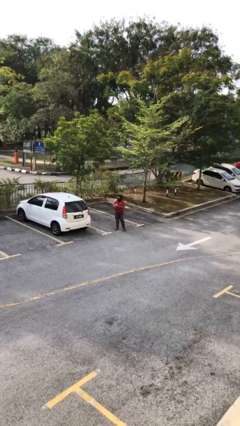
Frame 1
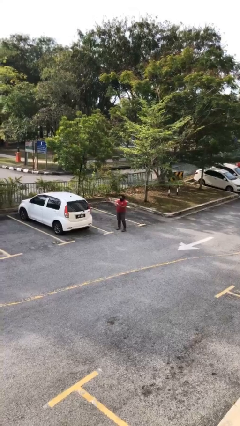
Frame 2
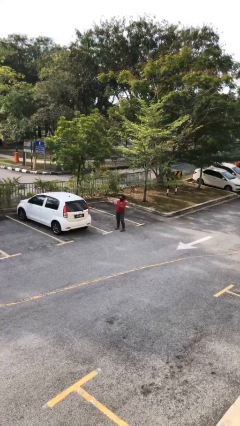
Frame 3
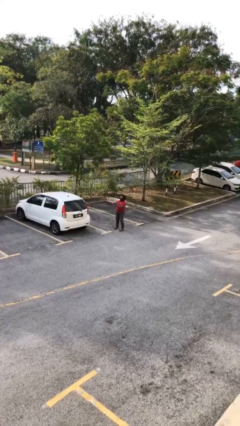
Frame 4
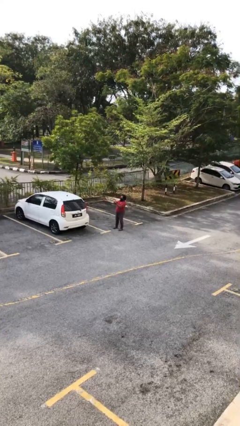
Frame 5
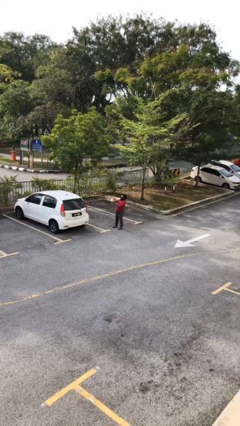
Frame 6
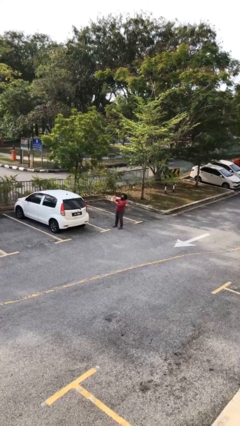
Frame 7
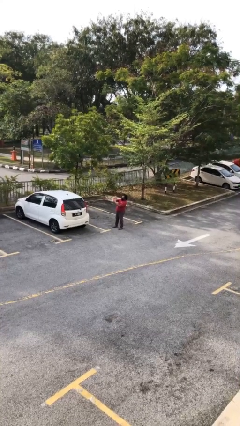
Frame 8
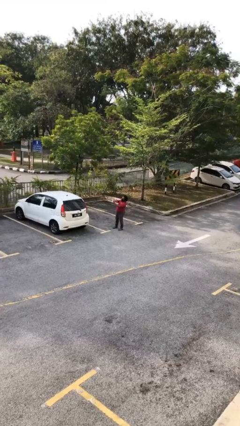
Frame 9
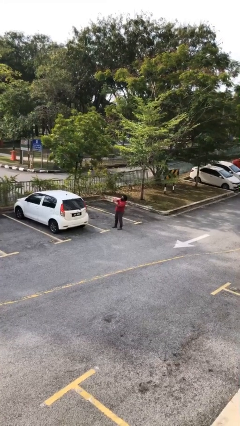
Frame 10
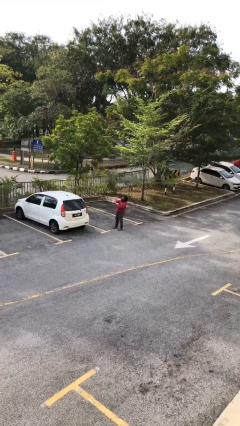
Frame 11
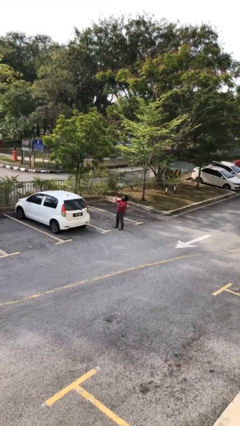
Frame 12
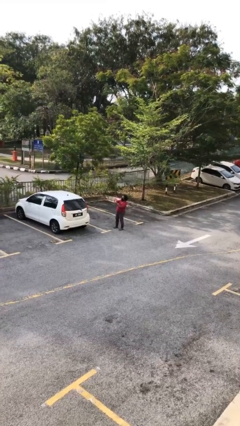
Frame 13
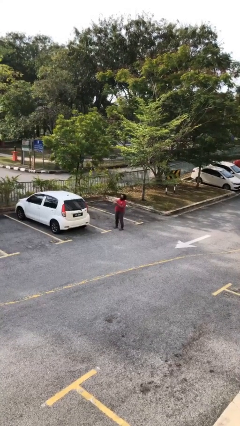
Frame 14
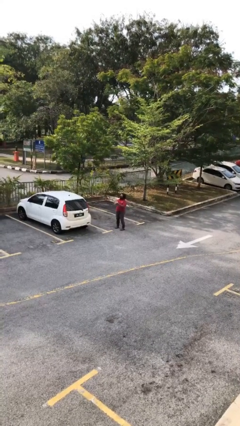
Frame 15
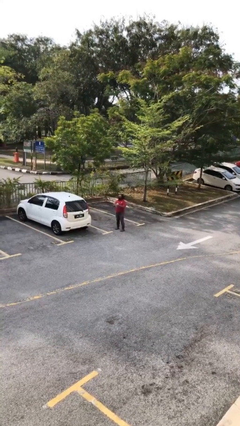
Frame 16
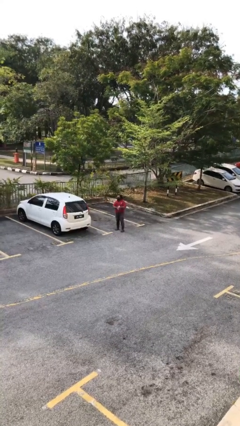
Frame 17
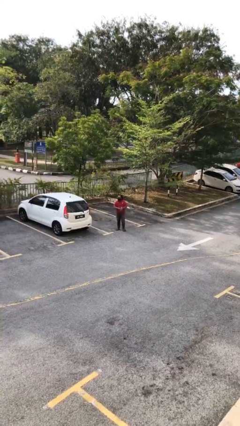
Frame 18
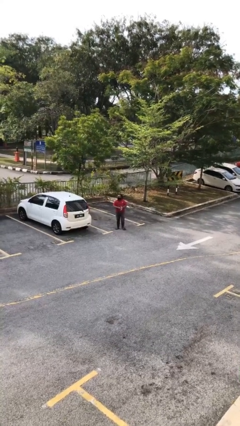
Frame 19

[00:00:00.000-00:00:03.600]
person reads document

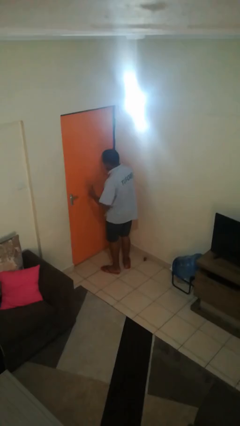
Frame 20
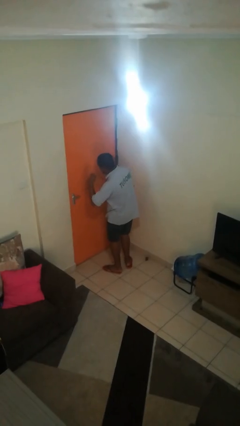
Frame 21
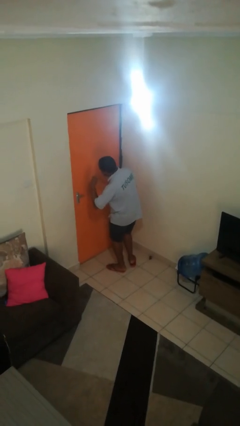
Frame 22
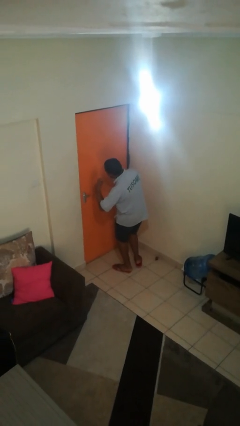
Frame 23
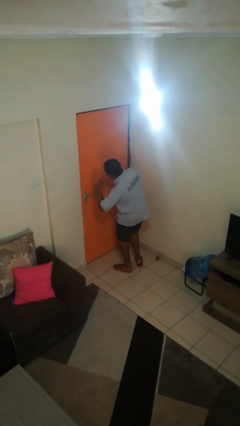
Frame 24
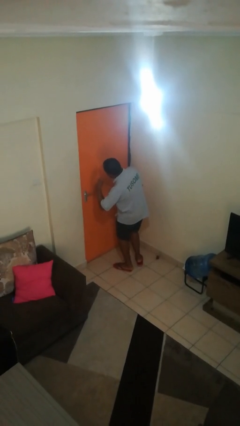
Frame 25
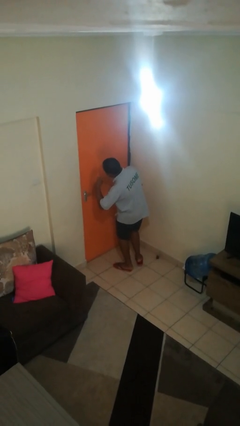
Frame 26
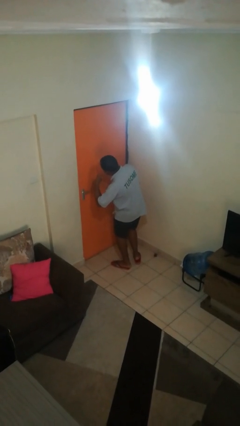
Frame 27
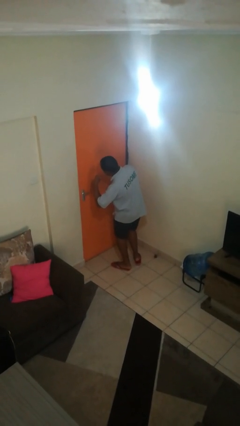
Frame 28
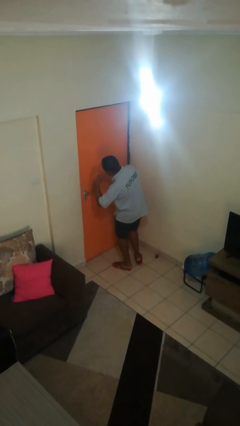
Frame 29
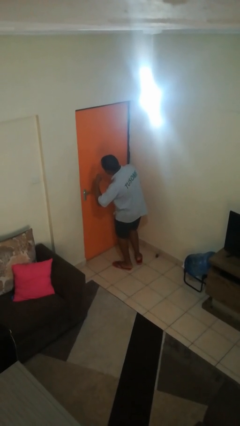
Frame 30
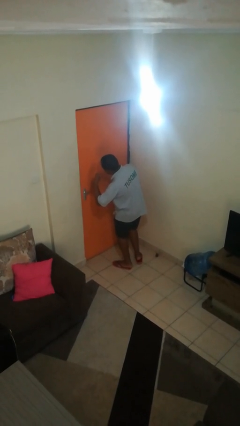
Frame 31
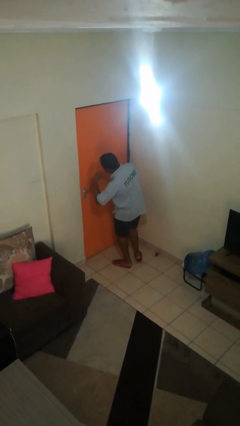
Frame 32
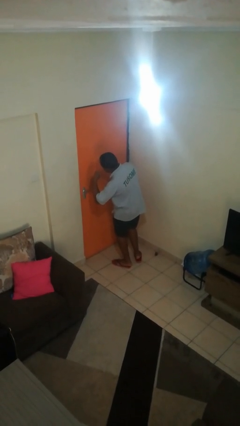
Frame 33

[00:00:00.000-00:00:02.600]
person gestures call me

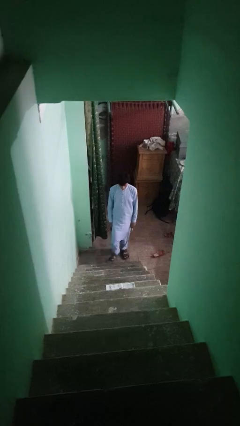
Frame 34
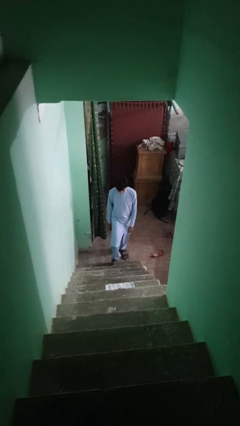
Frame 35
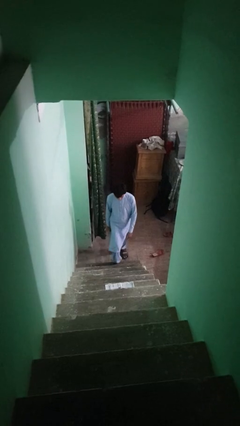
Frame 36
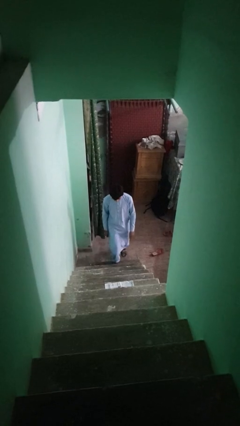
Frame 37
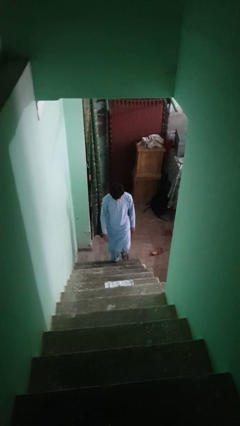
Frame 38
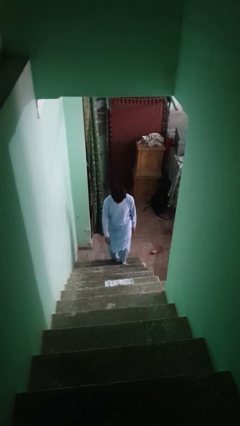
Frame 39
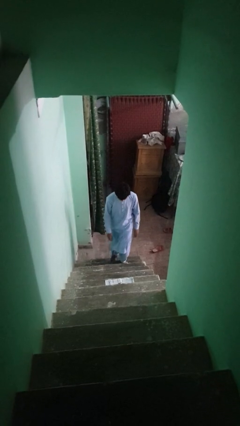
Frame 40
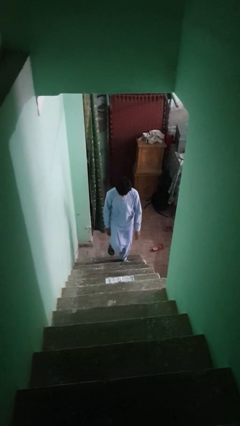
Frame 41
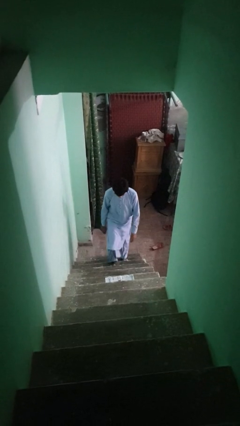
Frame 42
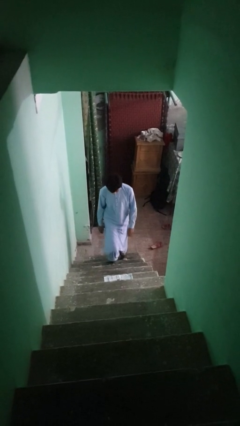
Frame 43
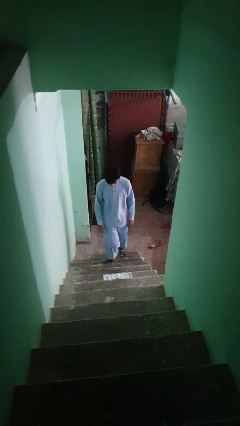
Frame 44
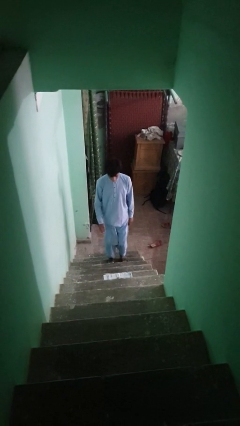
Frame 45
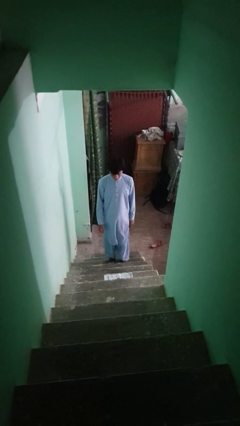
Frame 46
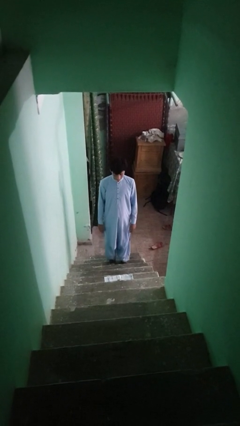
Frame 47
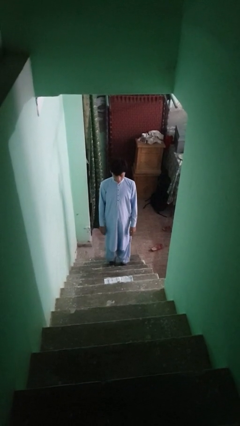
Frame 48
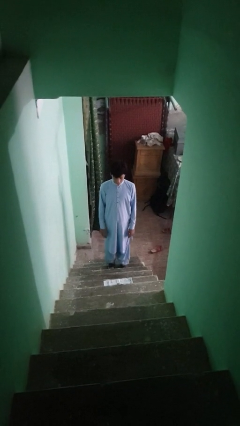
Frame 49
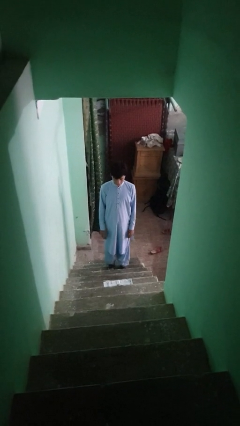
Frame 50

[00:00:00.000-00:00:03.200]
person climbs up stairs

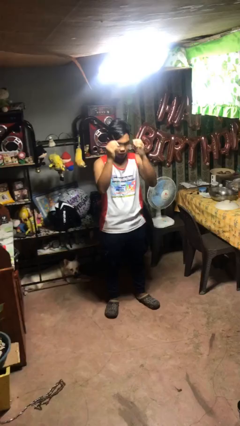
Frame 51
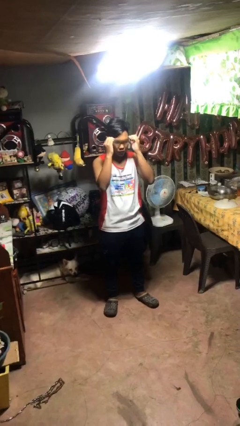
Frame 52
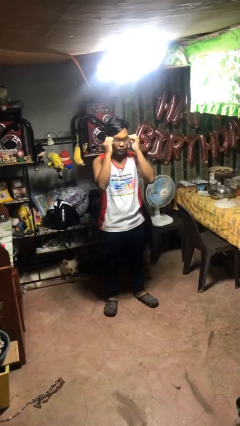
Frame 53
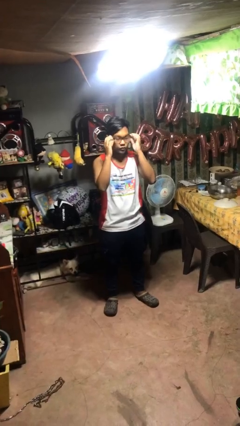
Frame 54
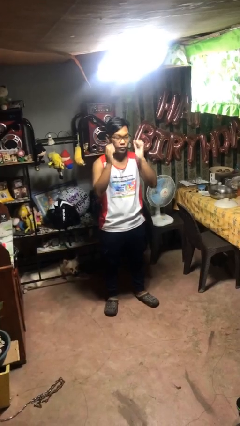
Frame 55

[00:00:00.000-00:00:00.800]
person puts on glasses

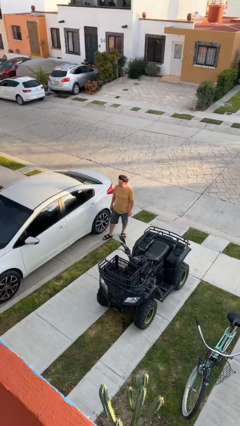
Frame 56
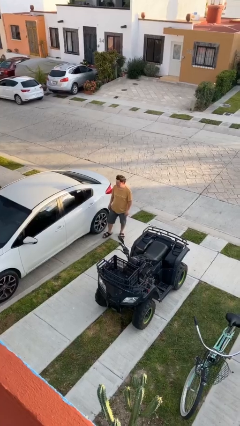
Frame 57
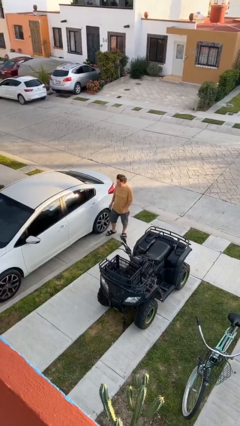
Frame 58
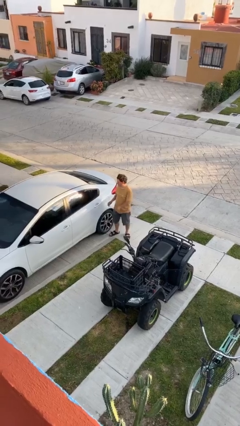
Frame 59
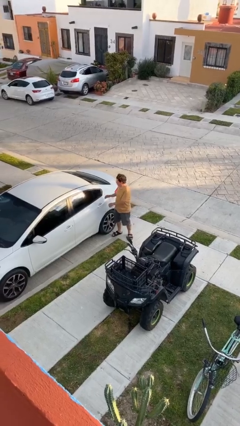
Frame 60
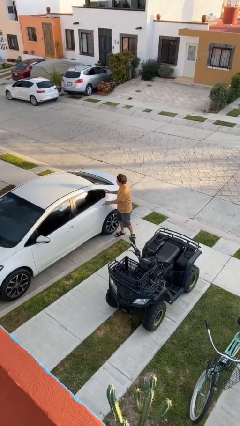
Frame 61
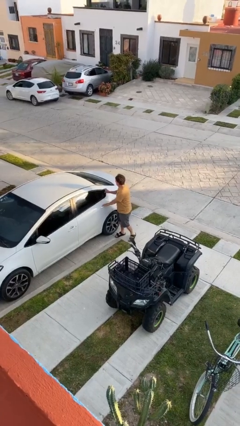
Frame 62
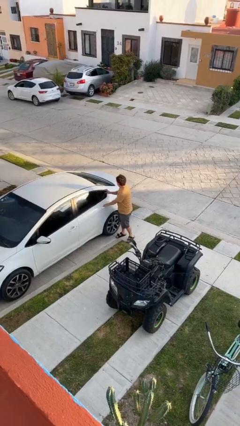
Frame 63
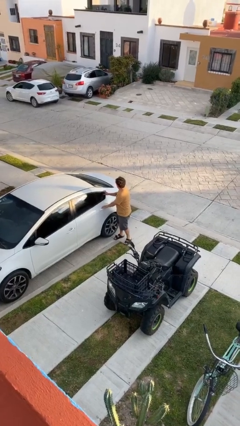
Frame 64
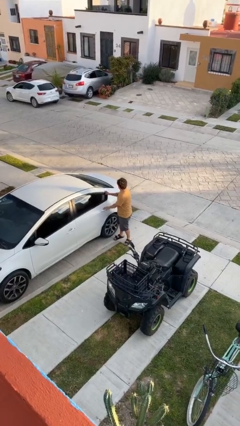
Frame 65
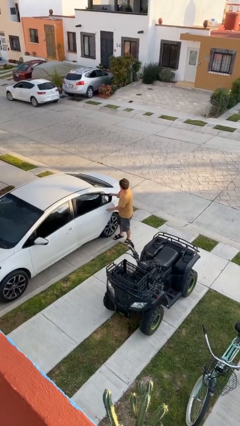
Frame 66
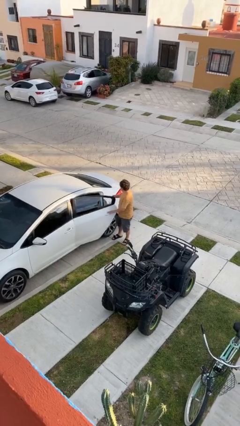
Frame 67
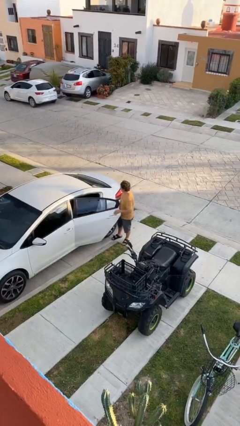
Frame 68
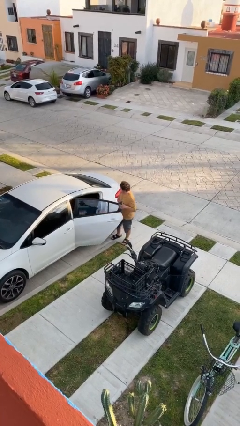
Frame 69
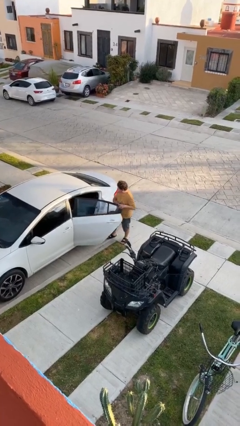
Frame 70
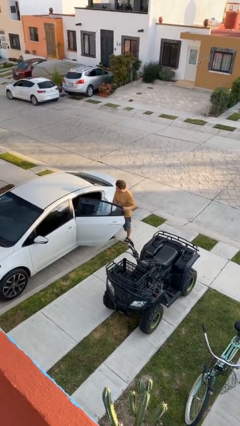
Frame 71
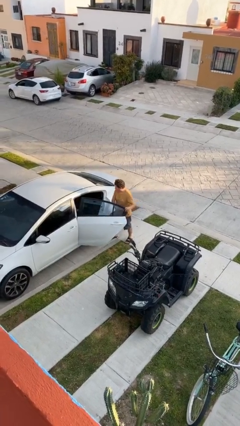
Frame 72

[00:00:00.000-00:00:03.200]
person opens car door

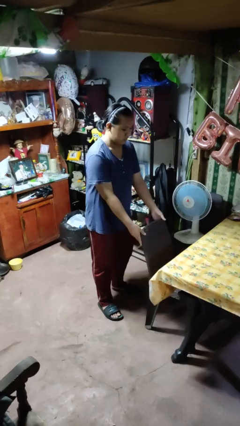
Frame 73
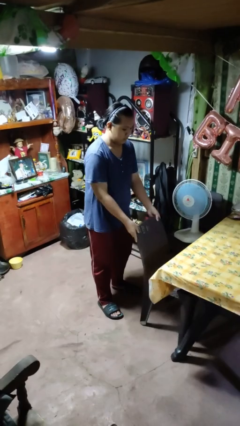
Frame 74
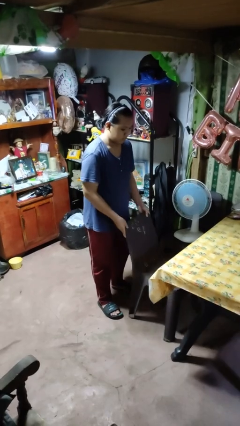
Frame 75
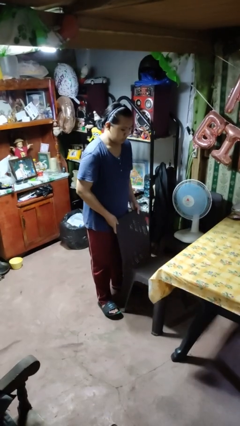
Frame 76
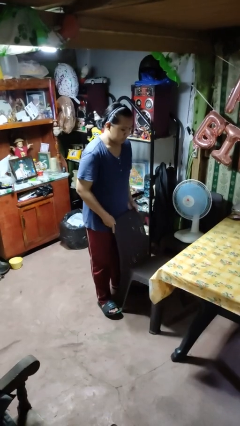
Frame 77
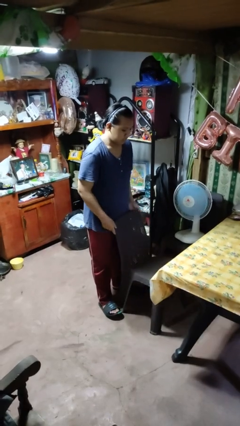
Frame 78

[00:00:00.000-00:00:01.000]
person pulls out chair

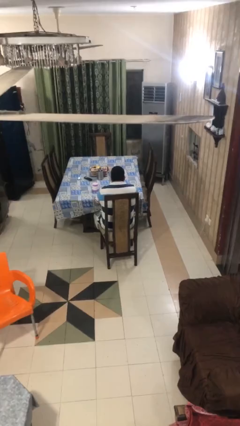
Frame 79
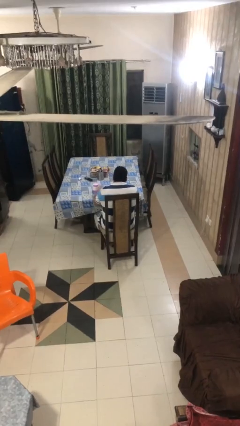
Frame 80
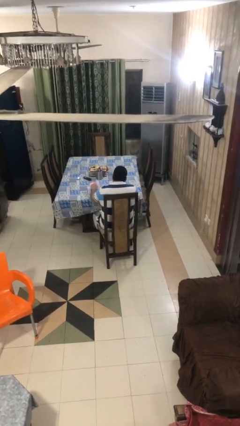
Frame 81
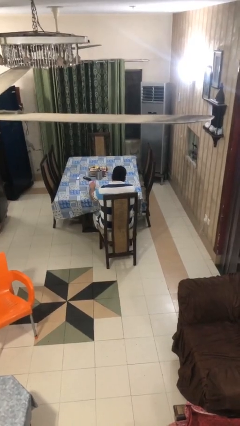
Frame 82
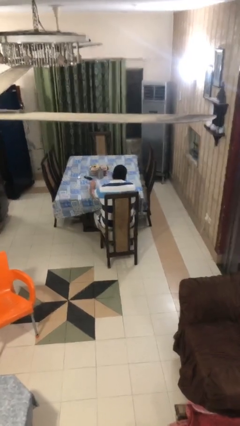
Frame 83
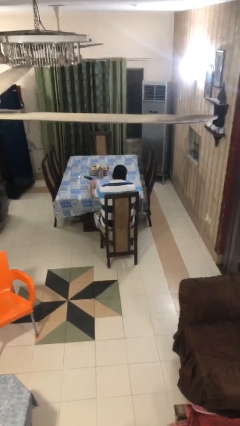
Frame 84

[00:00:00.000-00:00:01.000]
person knocks over glass

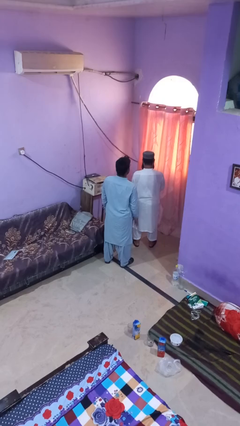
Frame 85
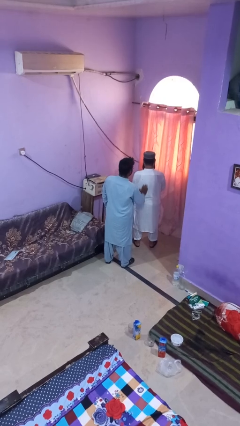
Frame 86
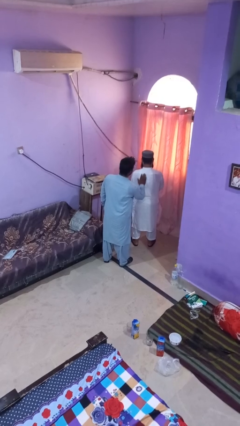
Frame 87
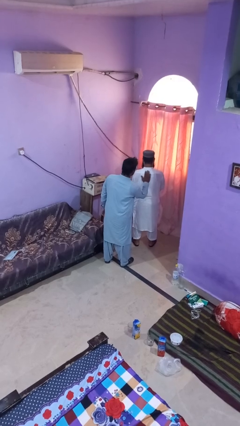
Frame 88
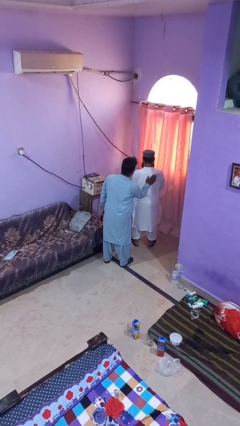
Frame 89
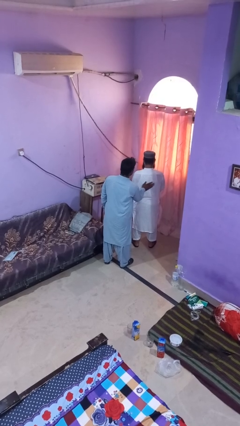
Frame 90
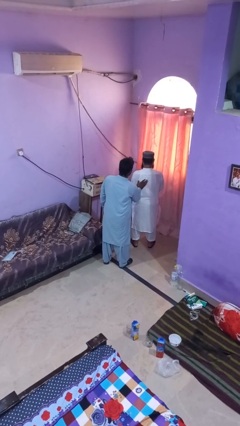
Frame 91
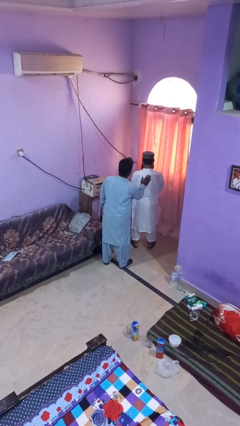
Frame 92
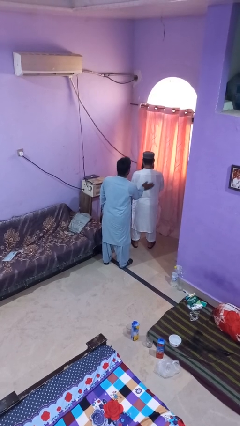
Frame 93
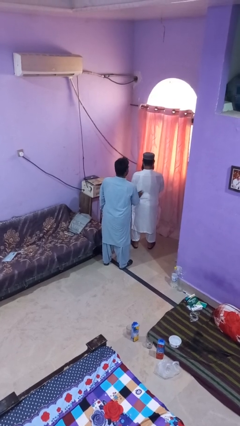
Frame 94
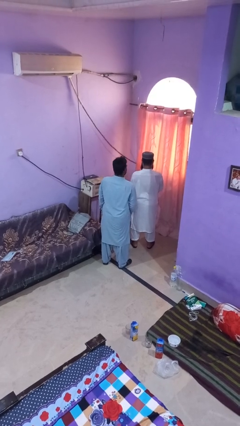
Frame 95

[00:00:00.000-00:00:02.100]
person touches back of person
